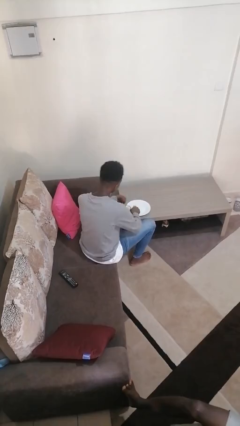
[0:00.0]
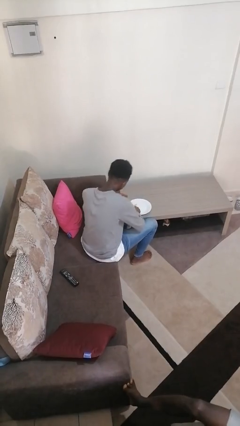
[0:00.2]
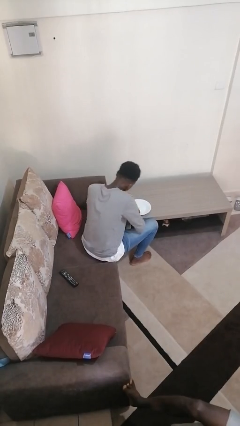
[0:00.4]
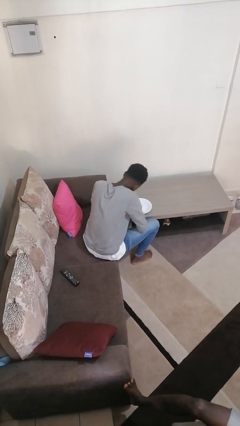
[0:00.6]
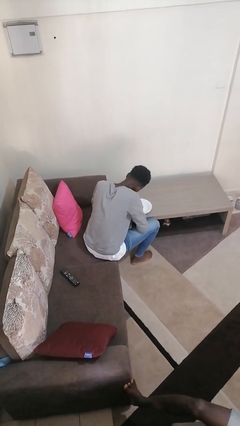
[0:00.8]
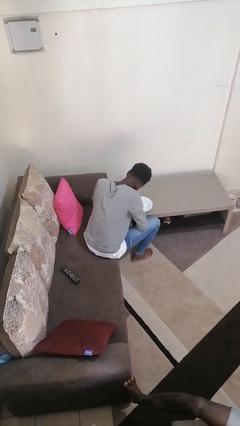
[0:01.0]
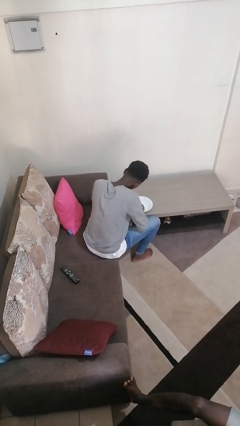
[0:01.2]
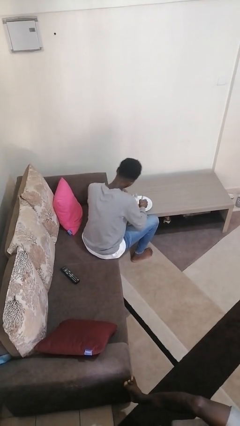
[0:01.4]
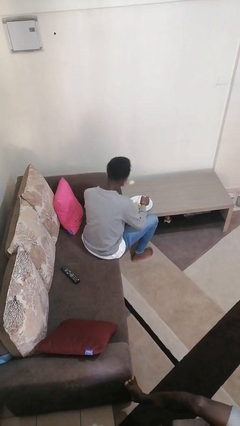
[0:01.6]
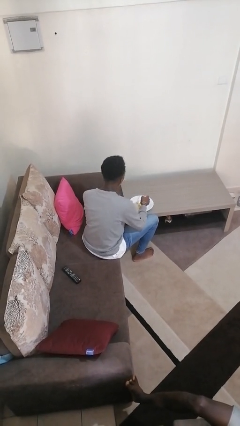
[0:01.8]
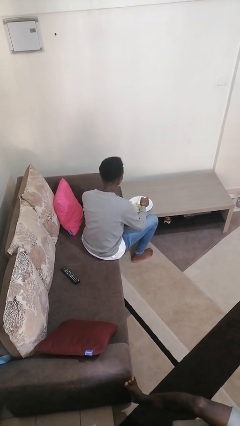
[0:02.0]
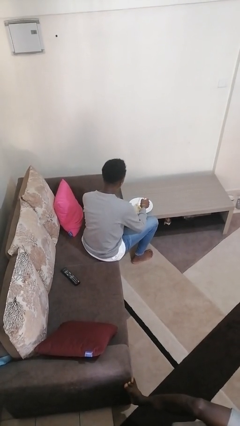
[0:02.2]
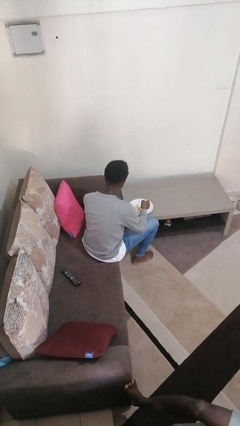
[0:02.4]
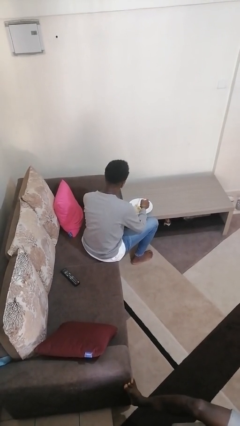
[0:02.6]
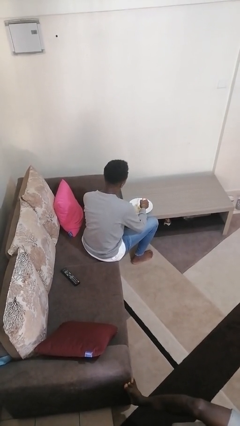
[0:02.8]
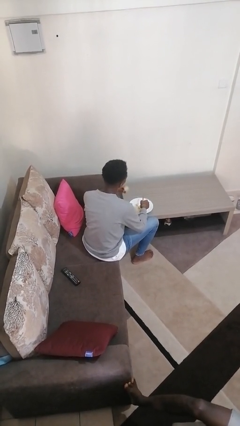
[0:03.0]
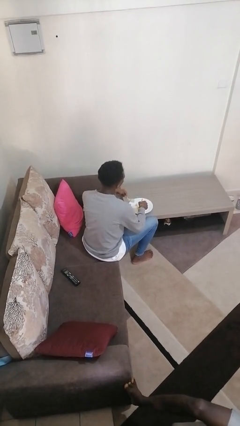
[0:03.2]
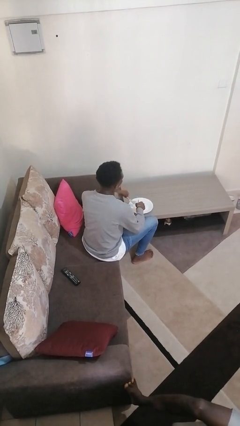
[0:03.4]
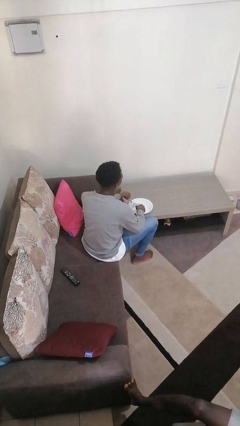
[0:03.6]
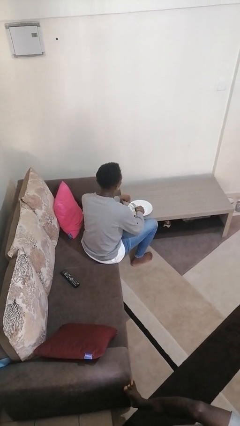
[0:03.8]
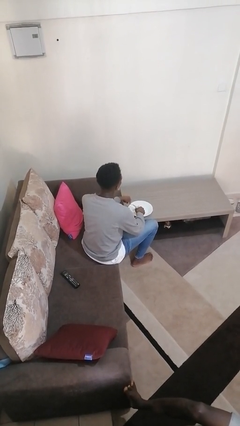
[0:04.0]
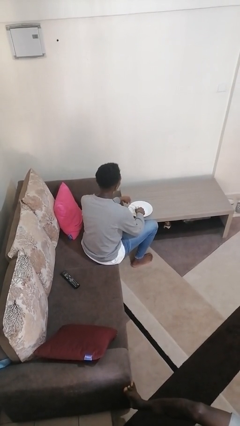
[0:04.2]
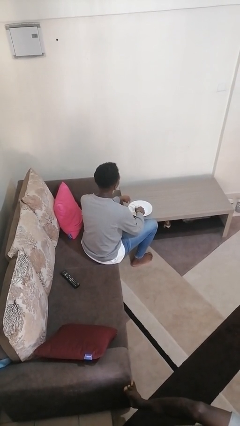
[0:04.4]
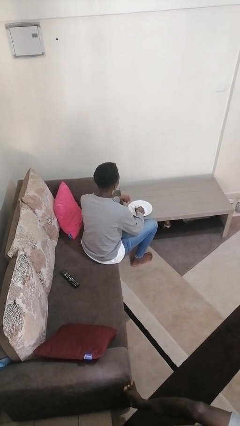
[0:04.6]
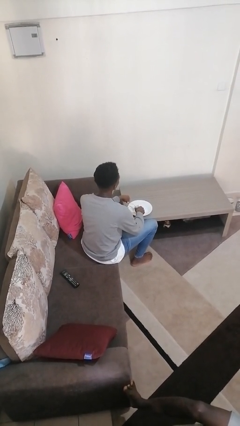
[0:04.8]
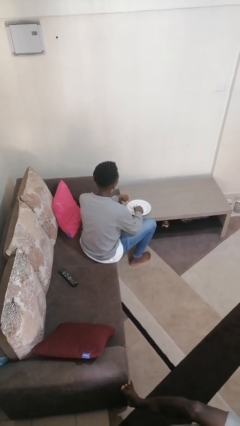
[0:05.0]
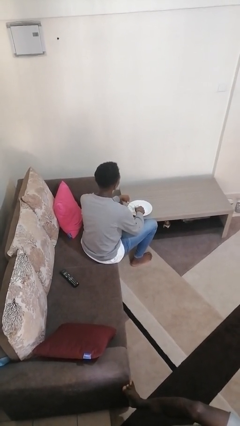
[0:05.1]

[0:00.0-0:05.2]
person eats with utensil

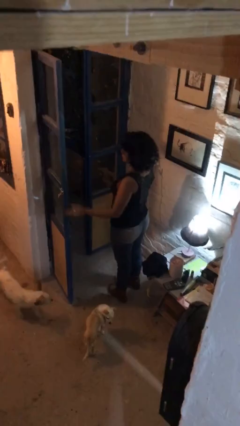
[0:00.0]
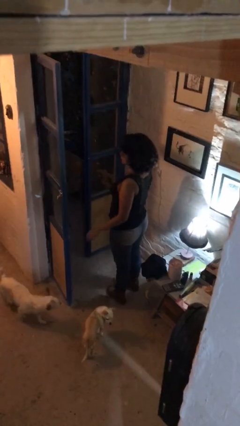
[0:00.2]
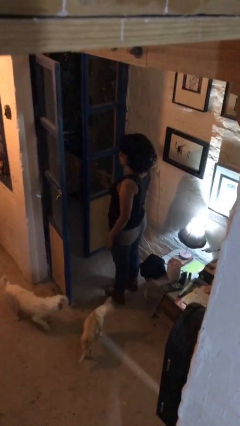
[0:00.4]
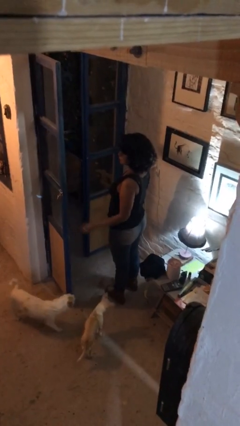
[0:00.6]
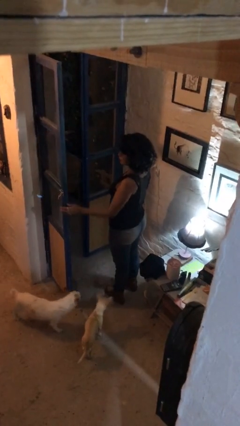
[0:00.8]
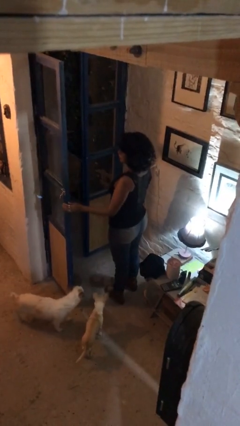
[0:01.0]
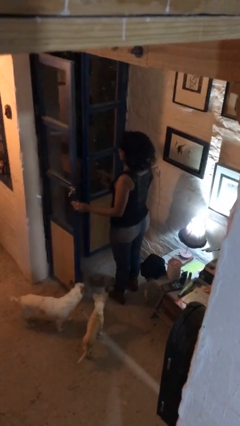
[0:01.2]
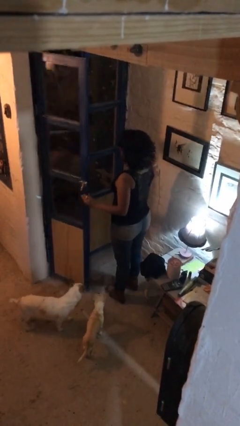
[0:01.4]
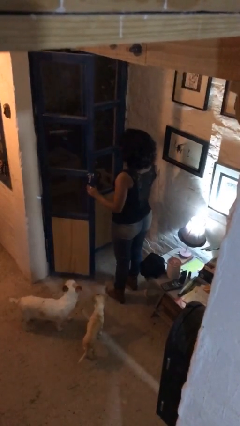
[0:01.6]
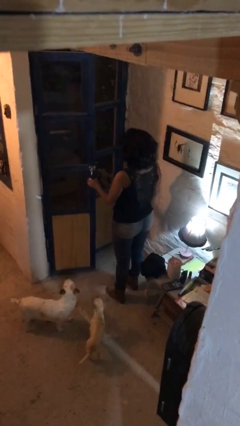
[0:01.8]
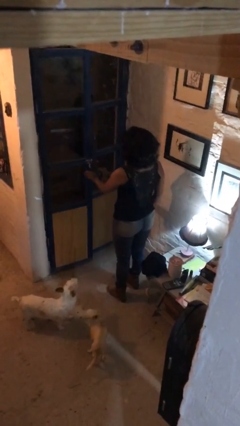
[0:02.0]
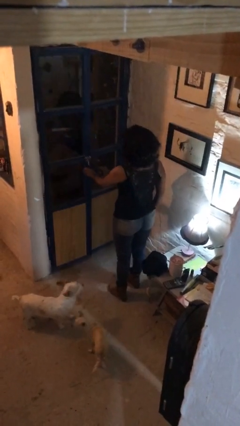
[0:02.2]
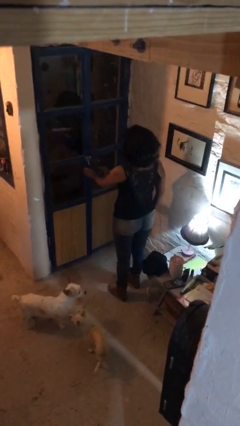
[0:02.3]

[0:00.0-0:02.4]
person closes facility door

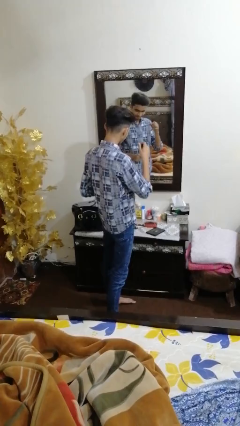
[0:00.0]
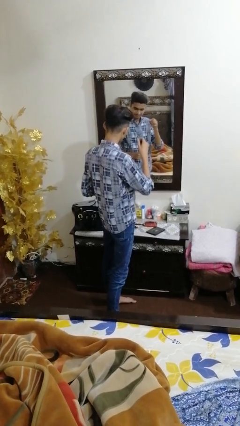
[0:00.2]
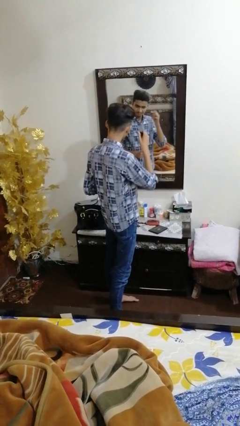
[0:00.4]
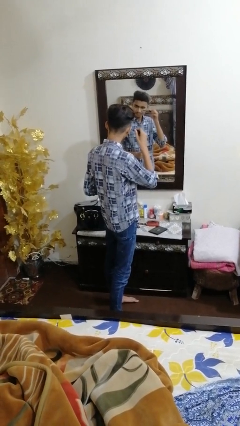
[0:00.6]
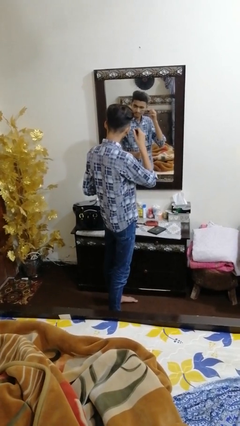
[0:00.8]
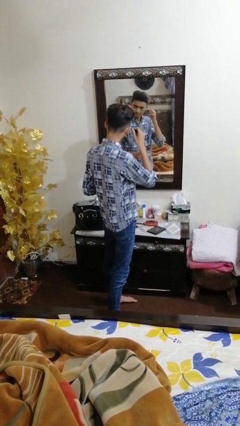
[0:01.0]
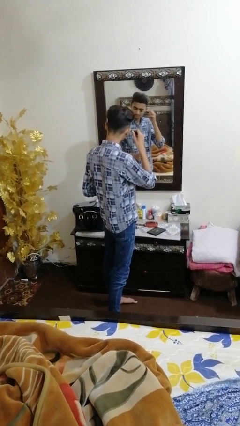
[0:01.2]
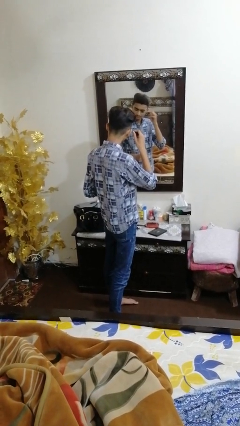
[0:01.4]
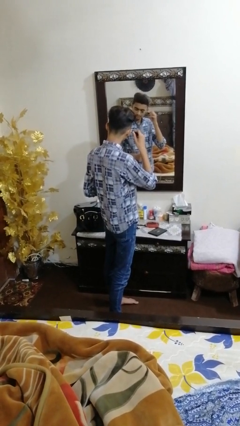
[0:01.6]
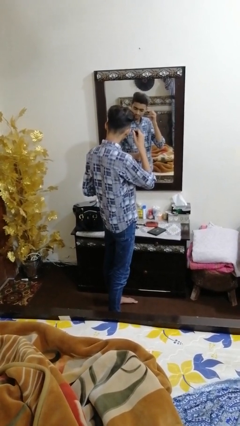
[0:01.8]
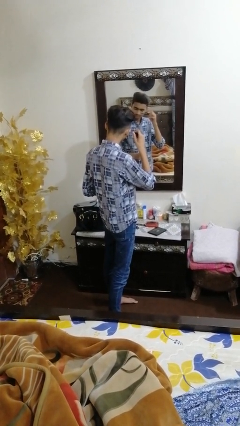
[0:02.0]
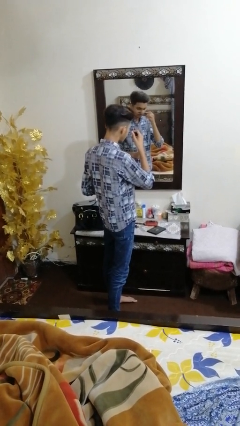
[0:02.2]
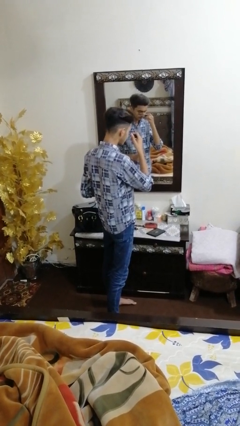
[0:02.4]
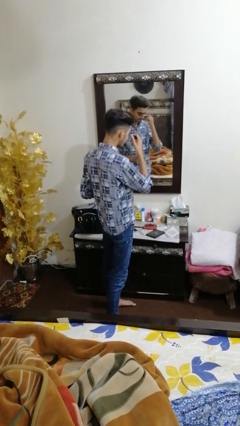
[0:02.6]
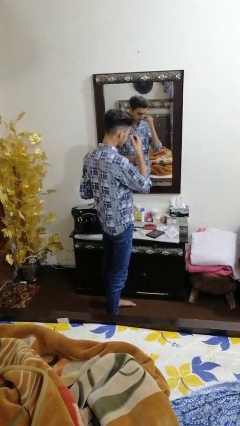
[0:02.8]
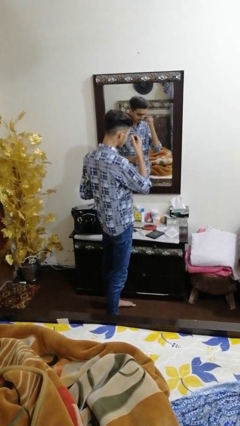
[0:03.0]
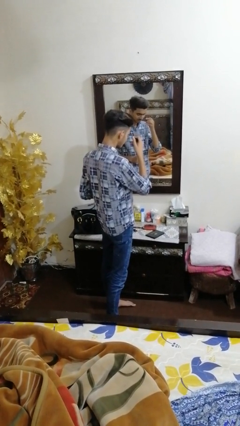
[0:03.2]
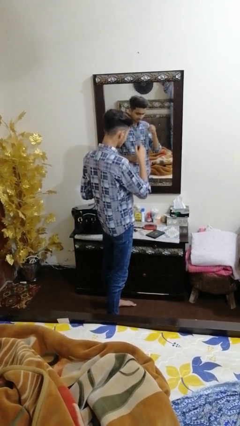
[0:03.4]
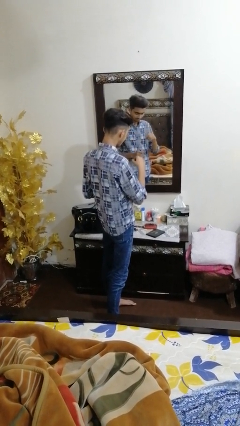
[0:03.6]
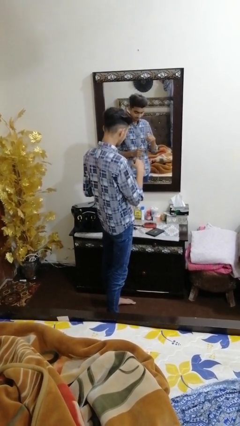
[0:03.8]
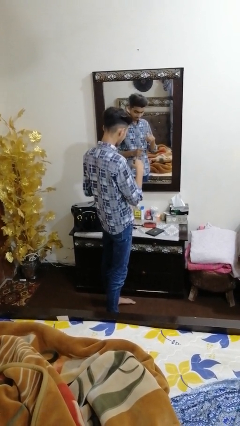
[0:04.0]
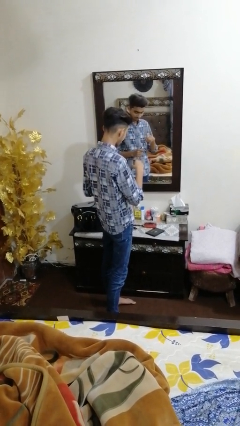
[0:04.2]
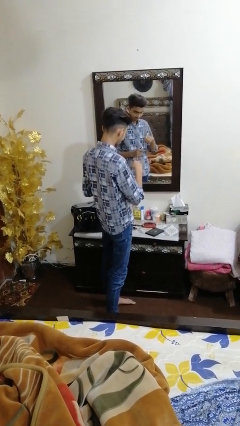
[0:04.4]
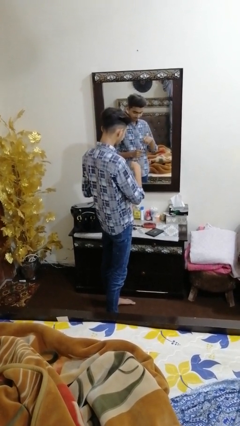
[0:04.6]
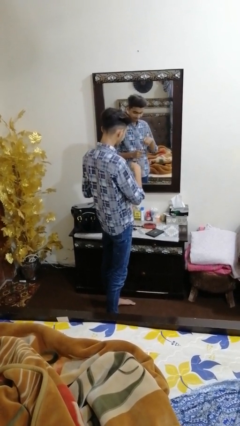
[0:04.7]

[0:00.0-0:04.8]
person applies eye makeup

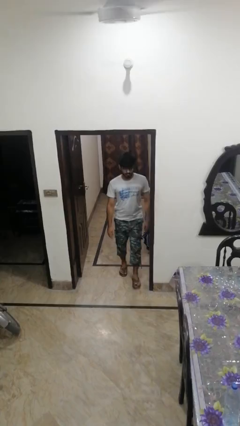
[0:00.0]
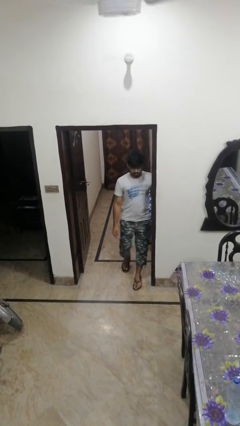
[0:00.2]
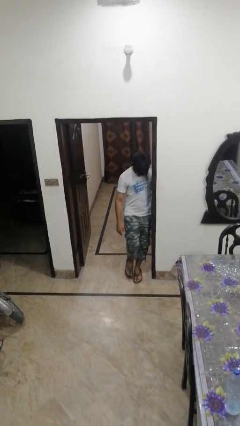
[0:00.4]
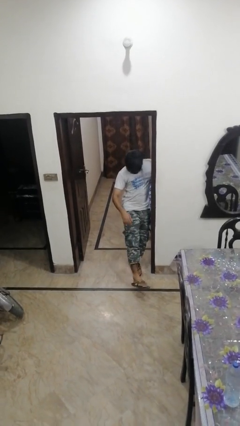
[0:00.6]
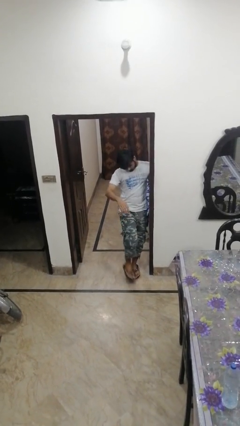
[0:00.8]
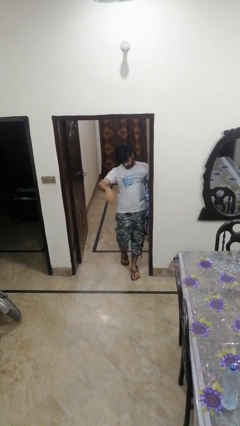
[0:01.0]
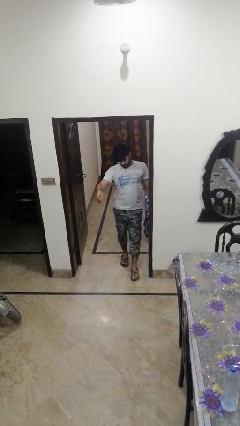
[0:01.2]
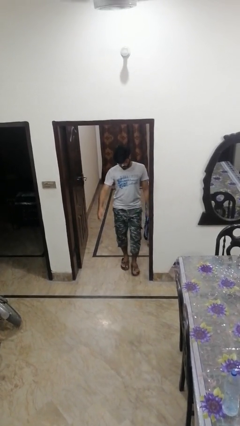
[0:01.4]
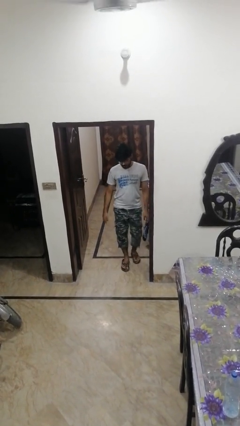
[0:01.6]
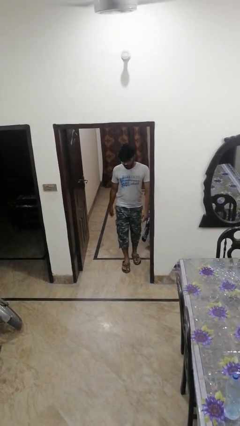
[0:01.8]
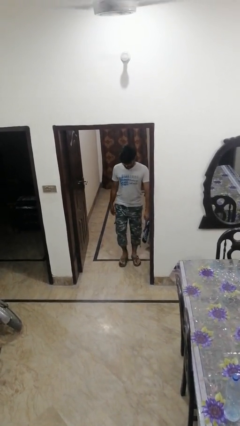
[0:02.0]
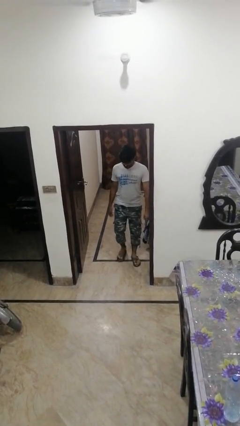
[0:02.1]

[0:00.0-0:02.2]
person bumps into wall

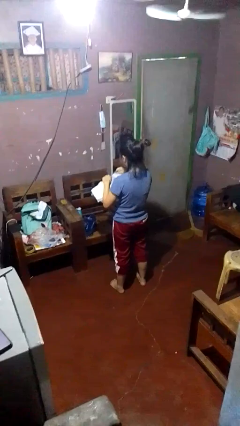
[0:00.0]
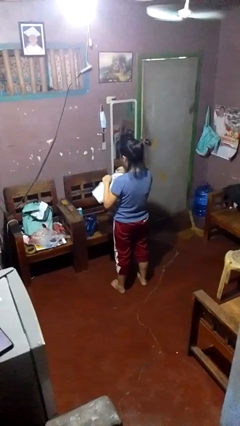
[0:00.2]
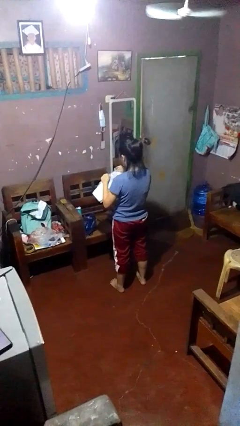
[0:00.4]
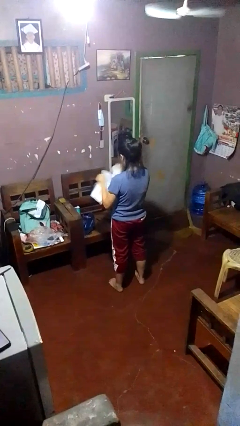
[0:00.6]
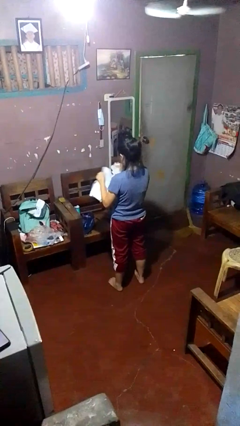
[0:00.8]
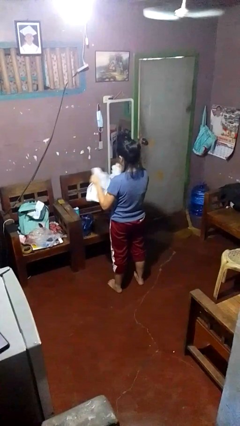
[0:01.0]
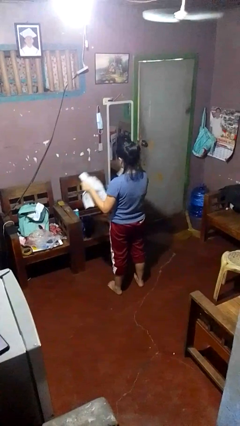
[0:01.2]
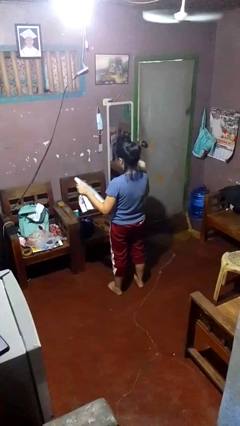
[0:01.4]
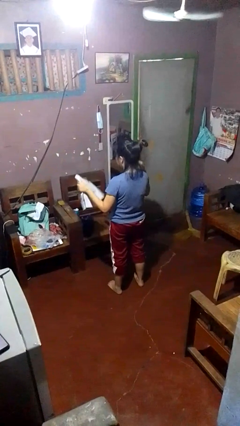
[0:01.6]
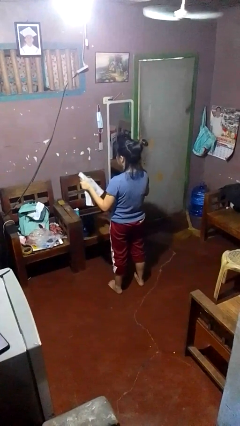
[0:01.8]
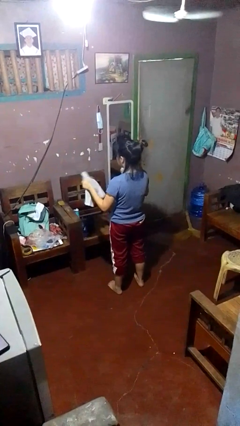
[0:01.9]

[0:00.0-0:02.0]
person tears paper

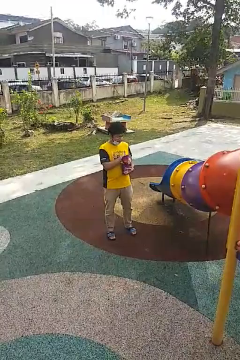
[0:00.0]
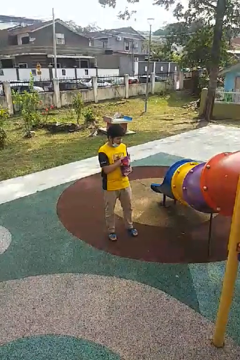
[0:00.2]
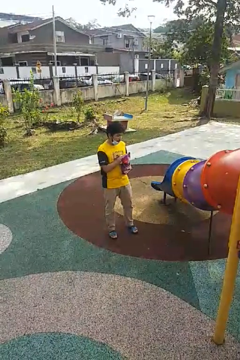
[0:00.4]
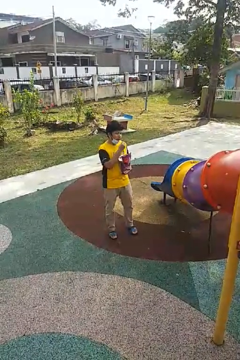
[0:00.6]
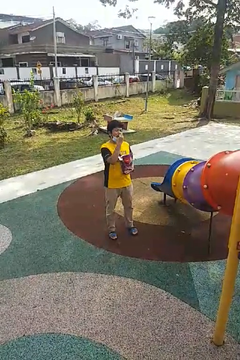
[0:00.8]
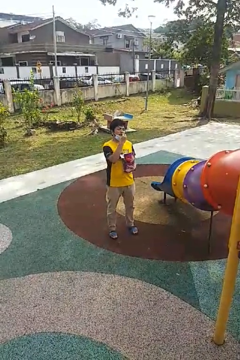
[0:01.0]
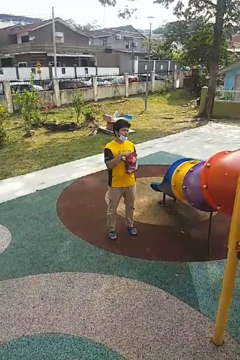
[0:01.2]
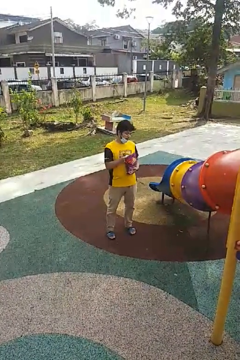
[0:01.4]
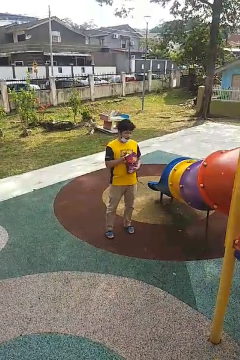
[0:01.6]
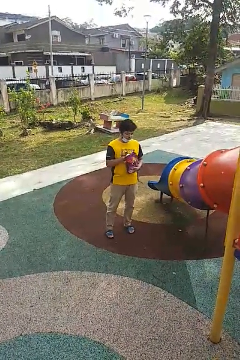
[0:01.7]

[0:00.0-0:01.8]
person eats snack from bag
